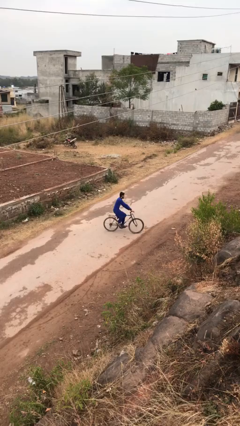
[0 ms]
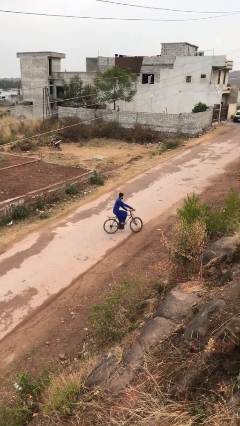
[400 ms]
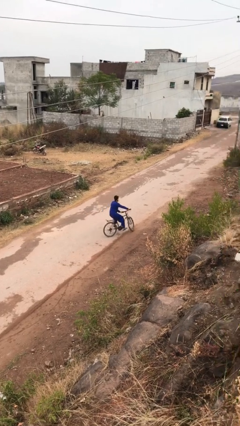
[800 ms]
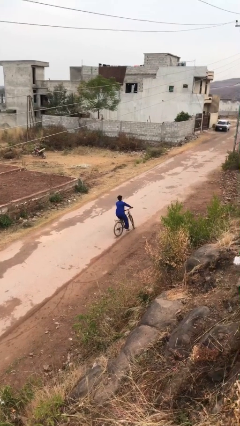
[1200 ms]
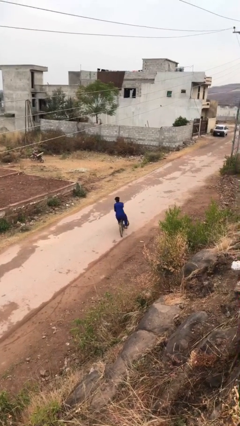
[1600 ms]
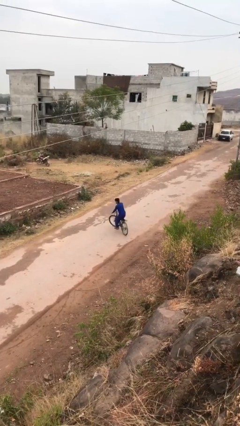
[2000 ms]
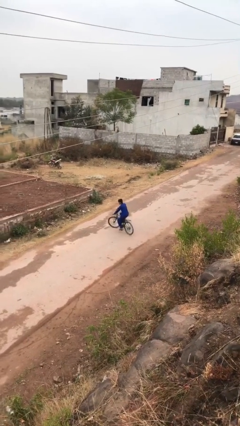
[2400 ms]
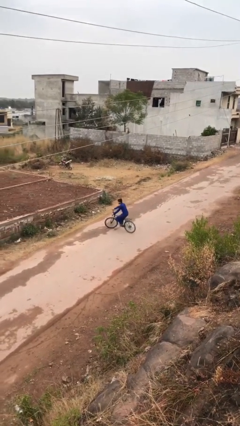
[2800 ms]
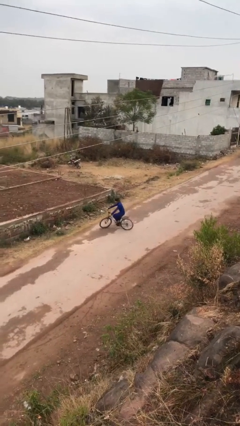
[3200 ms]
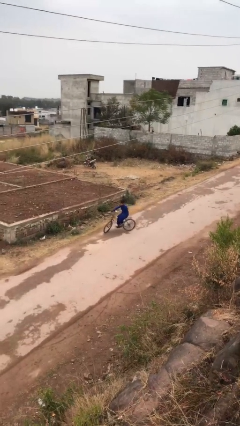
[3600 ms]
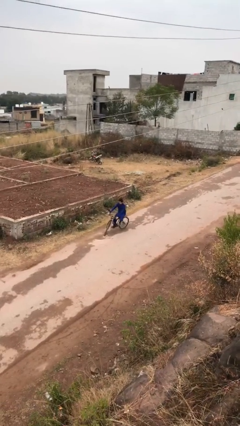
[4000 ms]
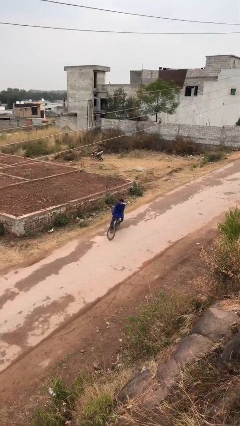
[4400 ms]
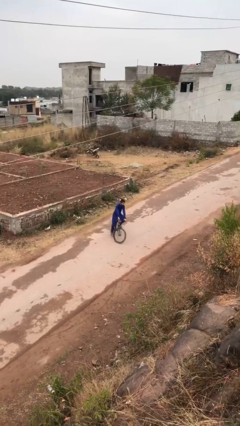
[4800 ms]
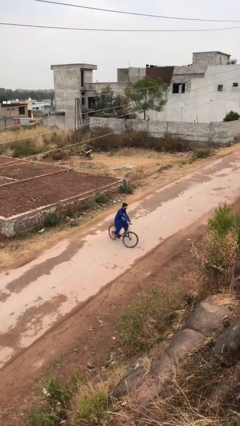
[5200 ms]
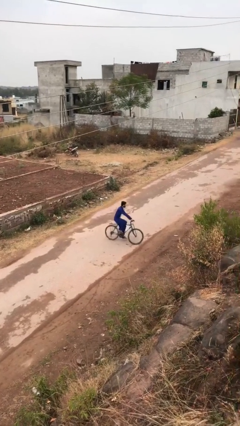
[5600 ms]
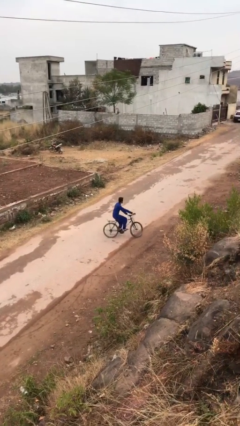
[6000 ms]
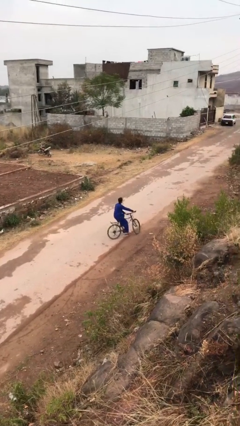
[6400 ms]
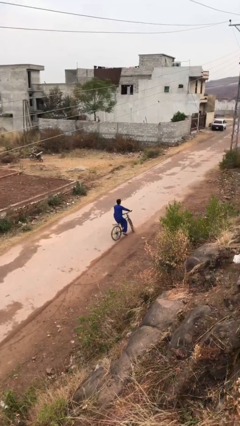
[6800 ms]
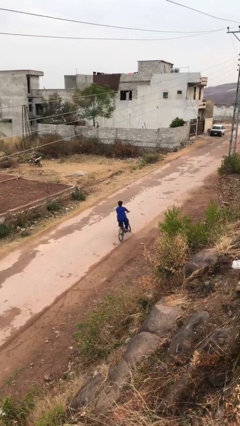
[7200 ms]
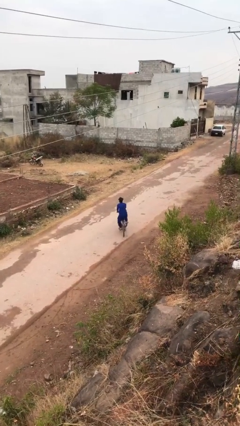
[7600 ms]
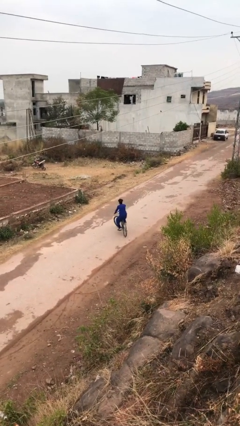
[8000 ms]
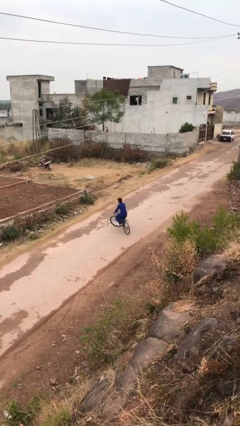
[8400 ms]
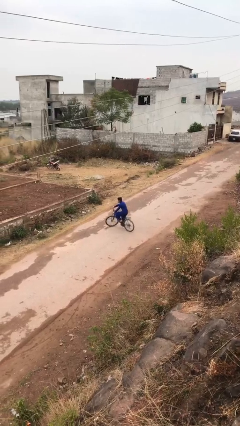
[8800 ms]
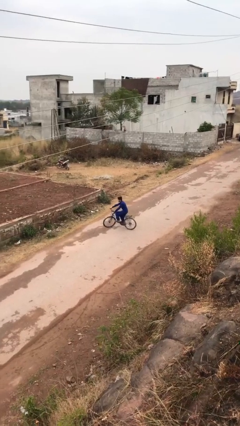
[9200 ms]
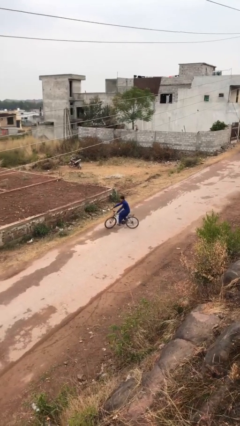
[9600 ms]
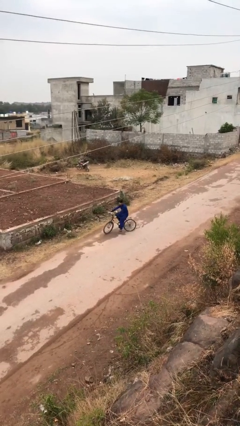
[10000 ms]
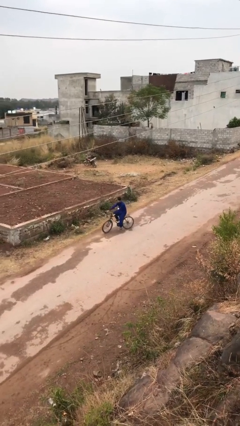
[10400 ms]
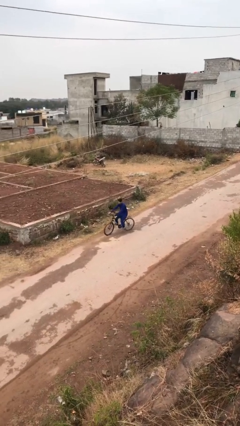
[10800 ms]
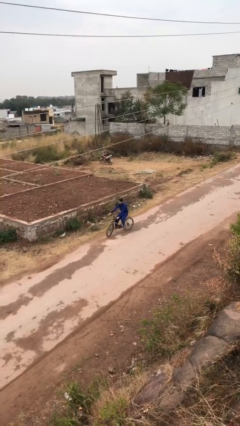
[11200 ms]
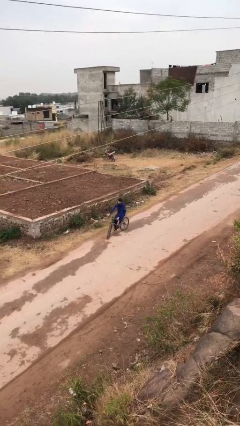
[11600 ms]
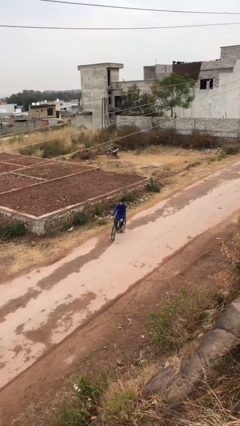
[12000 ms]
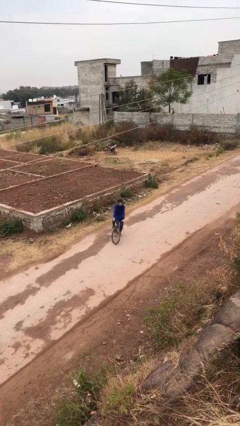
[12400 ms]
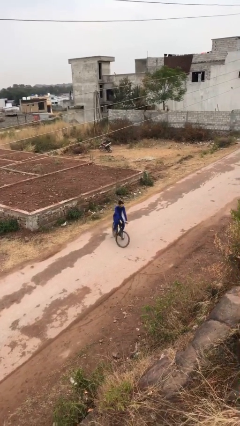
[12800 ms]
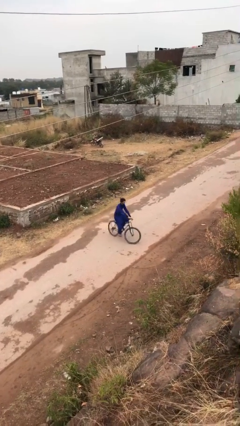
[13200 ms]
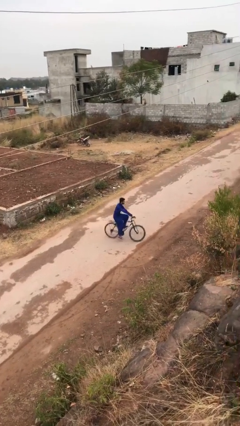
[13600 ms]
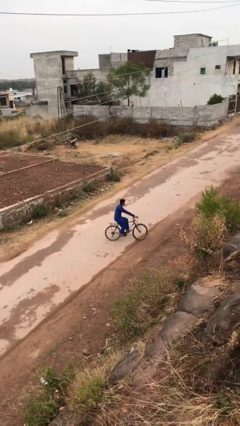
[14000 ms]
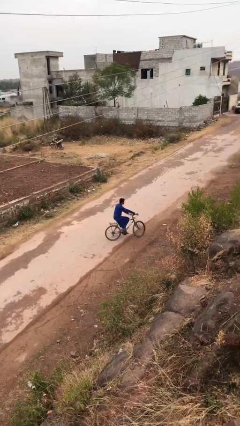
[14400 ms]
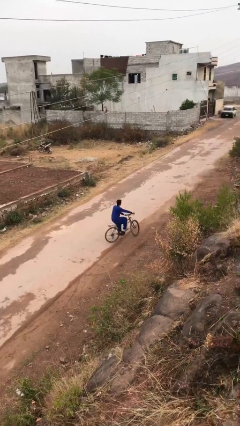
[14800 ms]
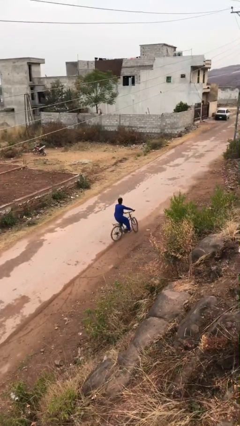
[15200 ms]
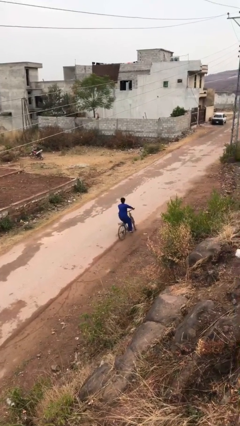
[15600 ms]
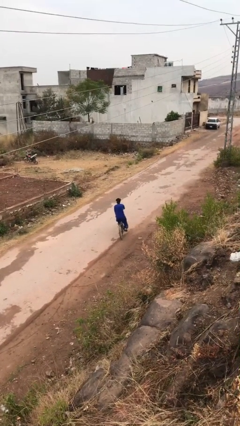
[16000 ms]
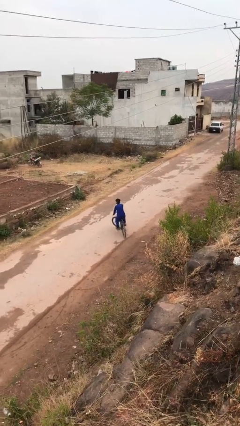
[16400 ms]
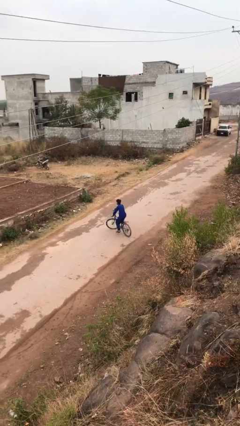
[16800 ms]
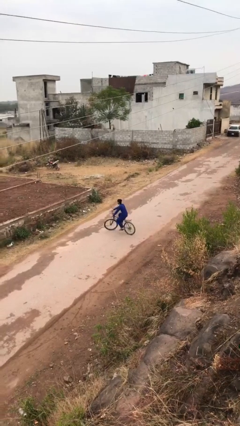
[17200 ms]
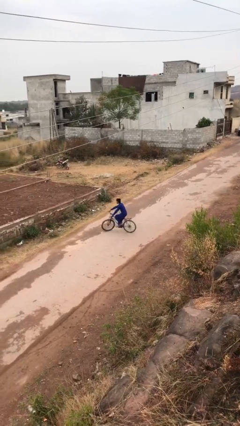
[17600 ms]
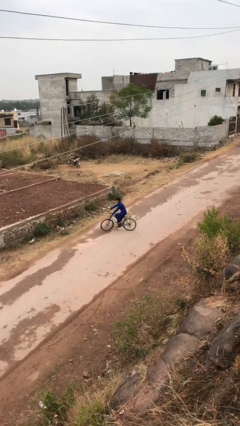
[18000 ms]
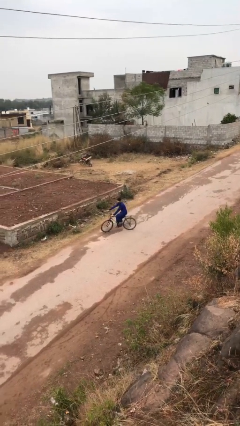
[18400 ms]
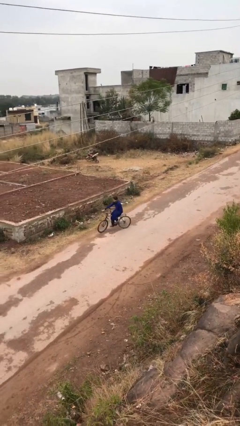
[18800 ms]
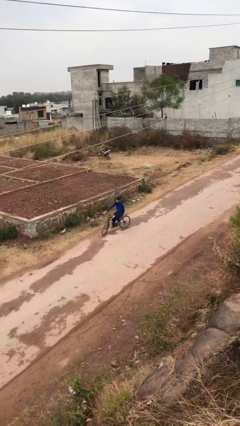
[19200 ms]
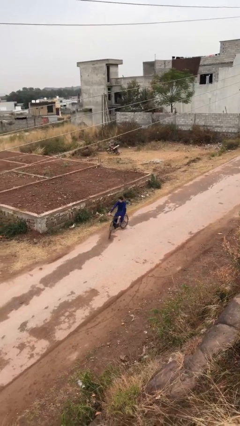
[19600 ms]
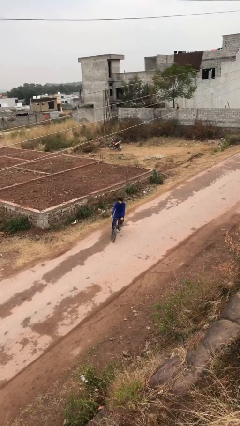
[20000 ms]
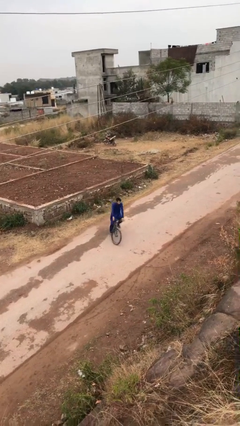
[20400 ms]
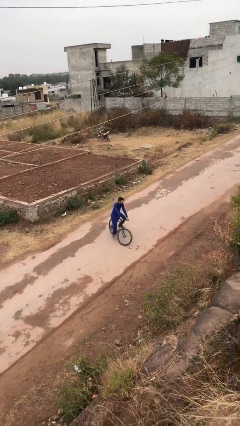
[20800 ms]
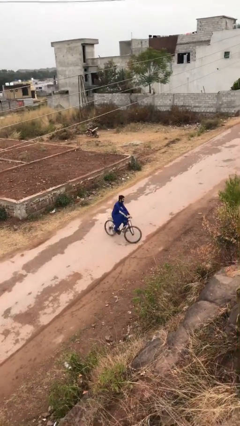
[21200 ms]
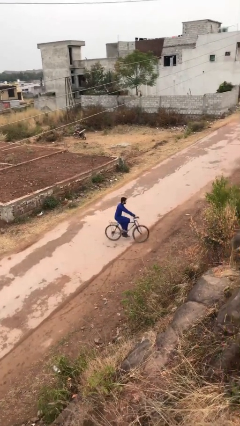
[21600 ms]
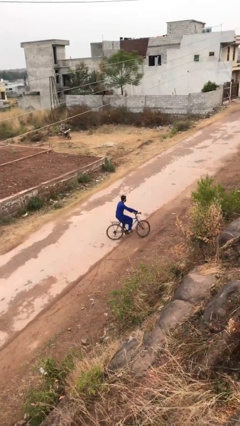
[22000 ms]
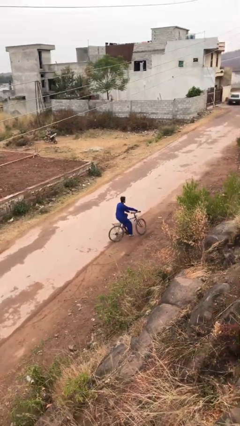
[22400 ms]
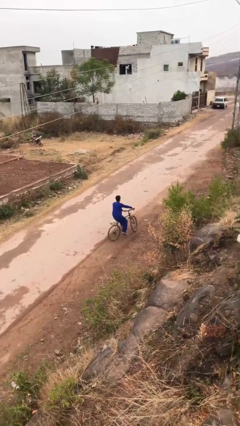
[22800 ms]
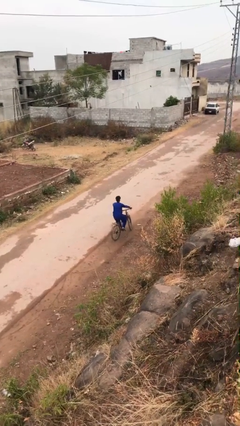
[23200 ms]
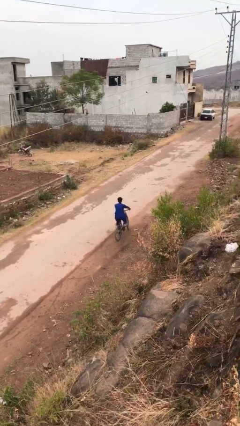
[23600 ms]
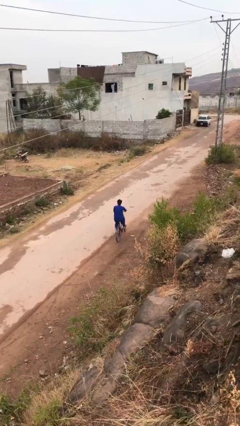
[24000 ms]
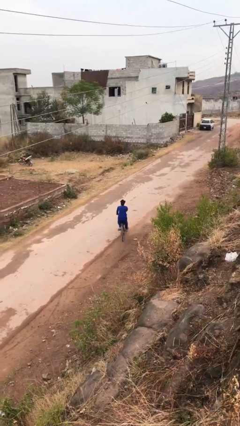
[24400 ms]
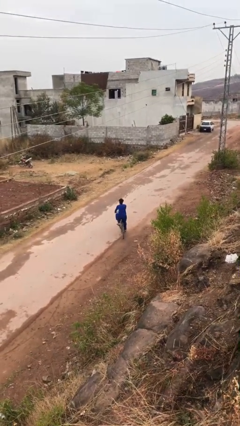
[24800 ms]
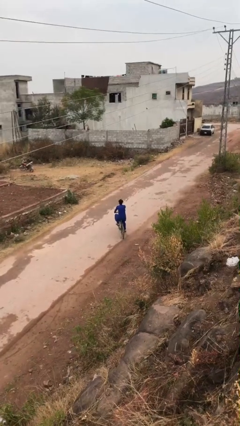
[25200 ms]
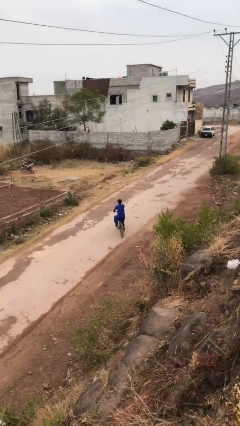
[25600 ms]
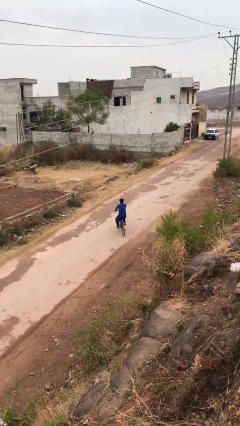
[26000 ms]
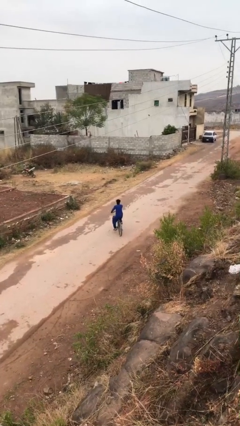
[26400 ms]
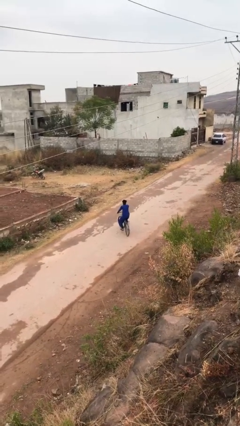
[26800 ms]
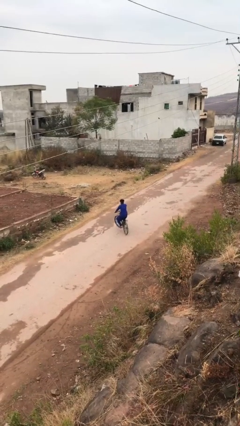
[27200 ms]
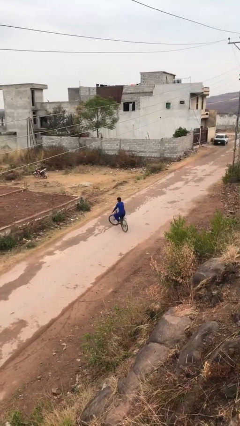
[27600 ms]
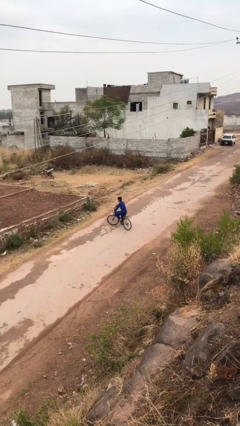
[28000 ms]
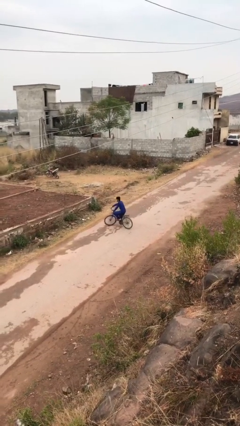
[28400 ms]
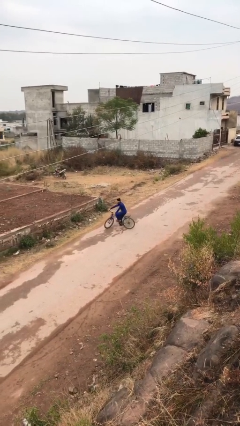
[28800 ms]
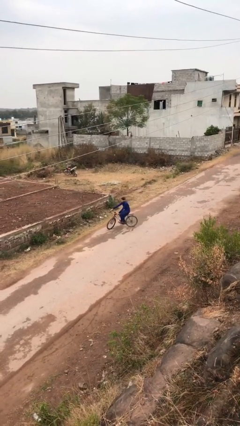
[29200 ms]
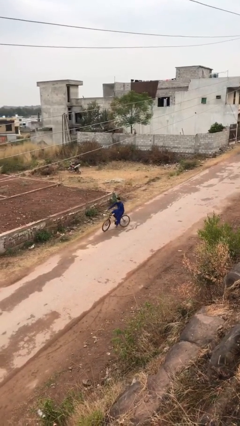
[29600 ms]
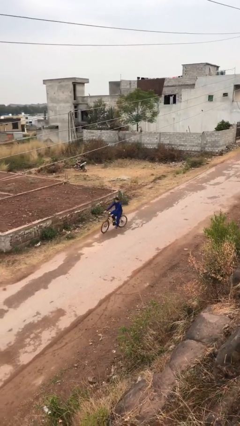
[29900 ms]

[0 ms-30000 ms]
person rides bicycle

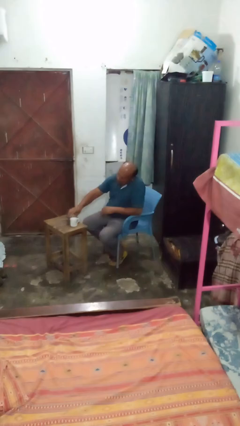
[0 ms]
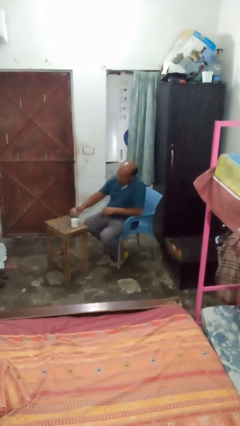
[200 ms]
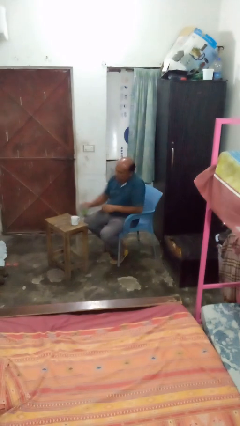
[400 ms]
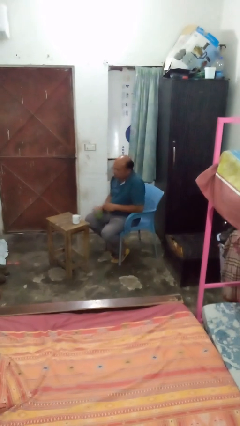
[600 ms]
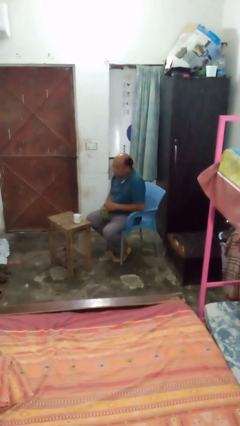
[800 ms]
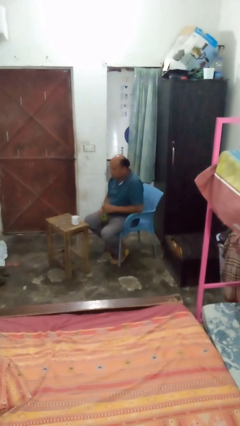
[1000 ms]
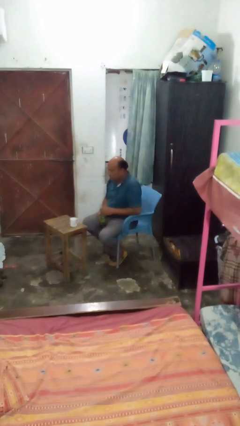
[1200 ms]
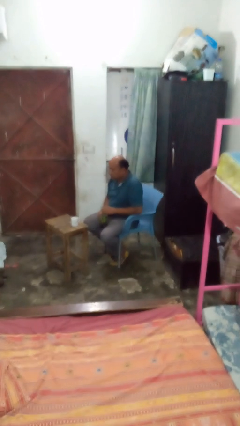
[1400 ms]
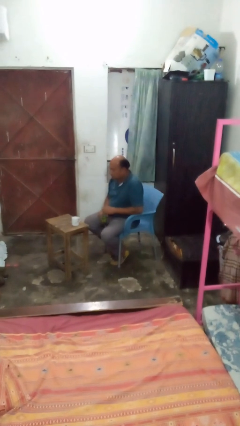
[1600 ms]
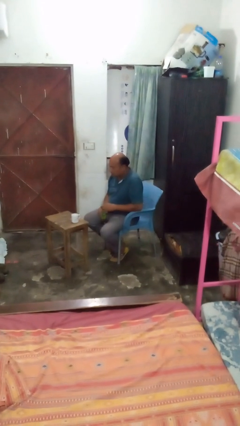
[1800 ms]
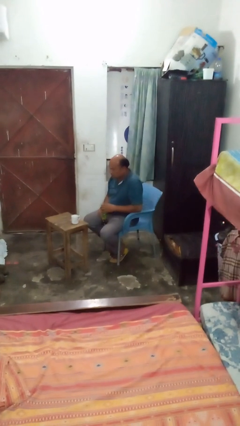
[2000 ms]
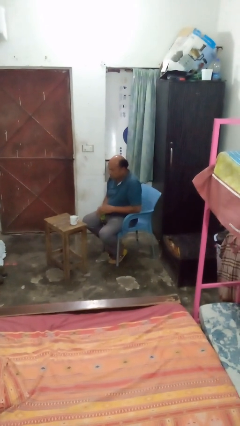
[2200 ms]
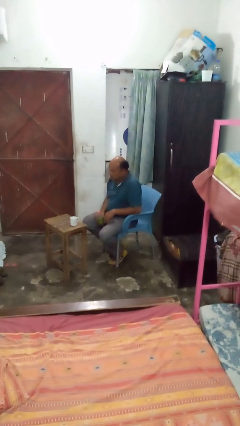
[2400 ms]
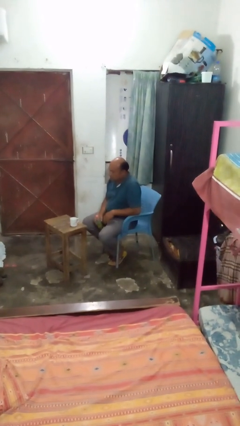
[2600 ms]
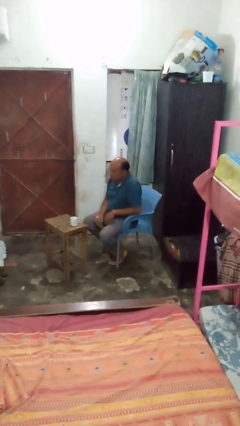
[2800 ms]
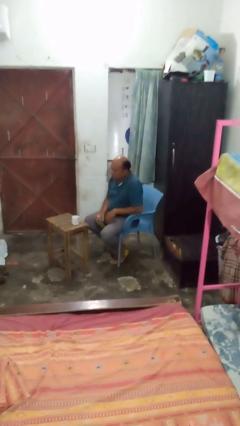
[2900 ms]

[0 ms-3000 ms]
person screws lid to bottle
